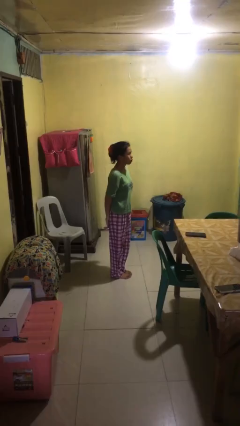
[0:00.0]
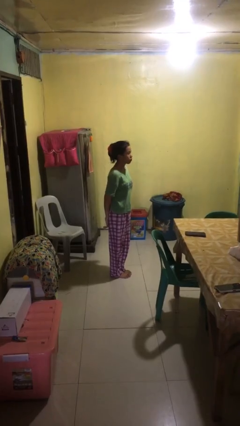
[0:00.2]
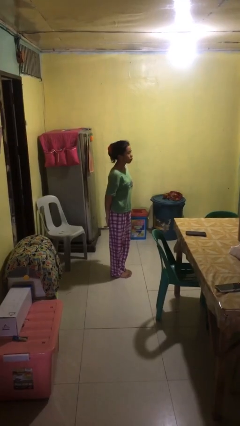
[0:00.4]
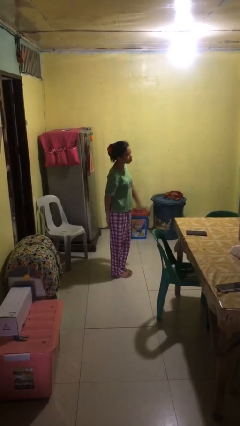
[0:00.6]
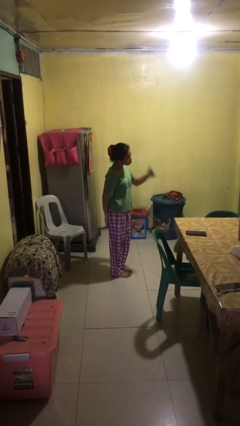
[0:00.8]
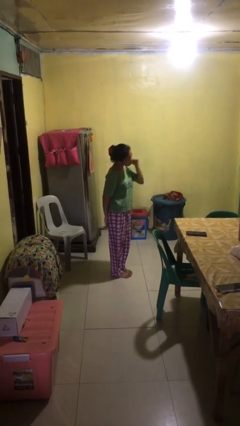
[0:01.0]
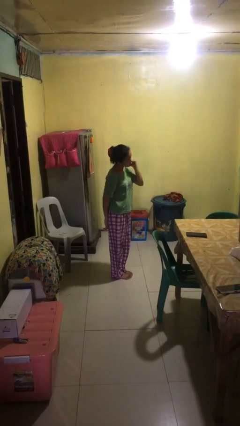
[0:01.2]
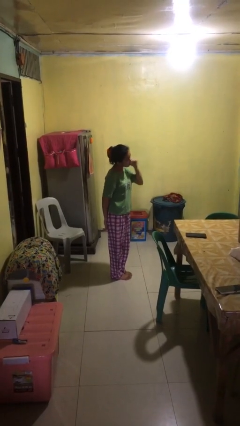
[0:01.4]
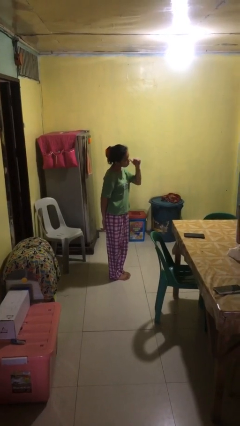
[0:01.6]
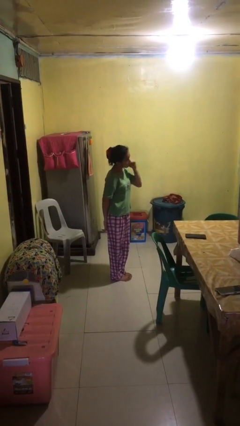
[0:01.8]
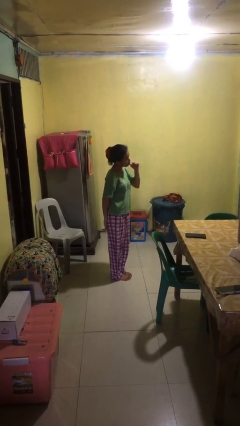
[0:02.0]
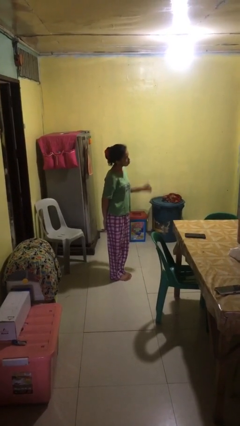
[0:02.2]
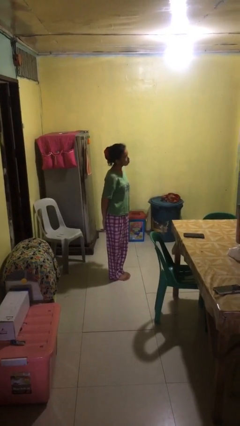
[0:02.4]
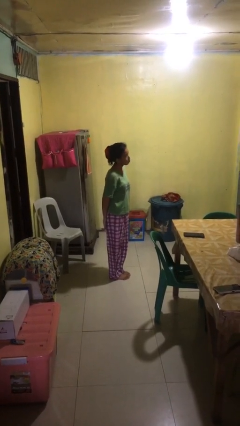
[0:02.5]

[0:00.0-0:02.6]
person gestures behind me

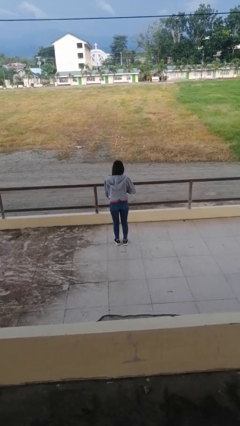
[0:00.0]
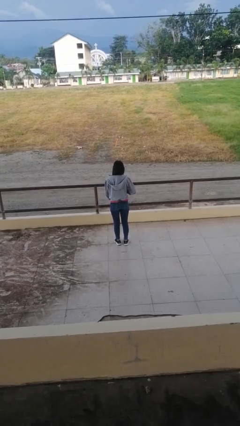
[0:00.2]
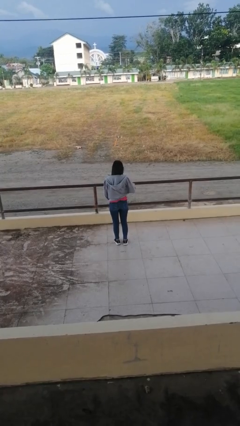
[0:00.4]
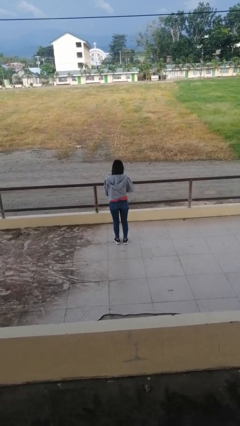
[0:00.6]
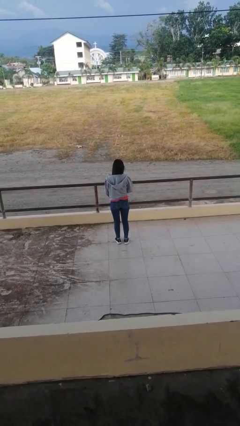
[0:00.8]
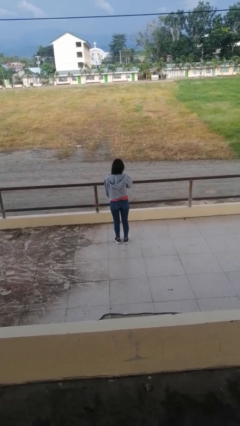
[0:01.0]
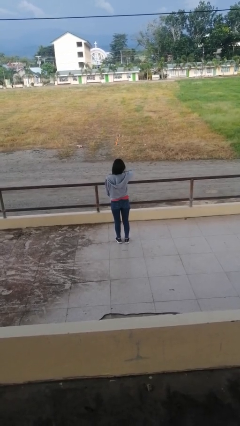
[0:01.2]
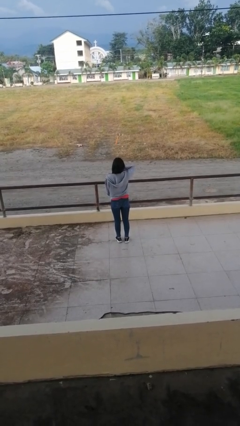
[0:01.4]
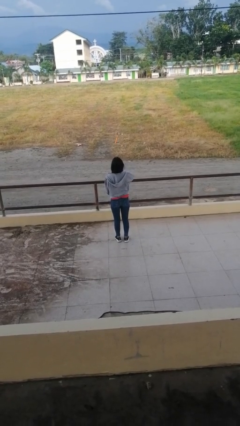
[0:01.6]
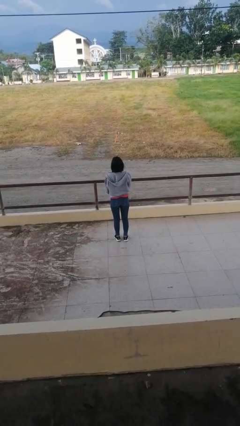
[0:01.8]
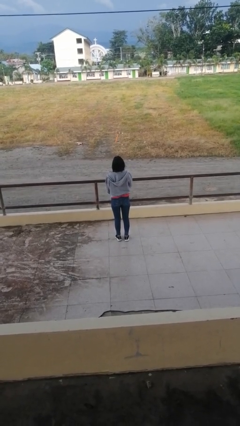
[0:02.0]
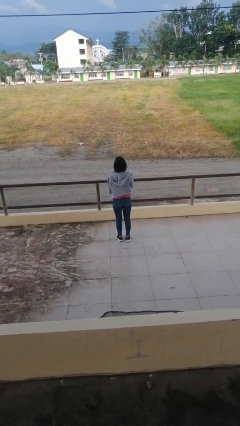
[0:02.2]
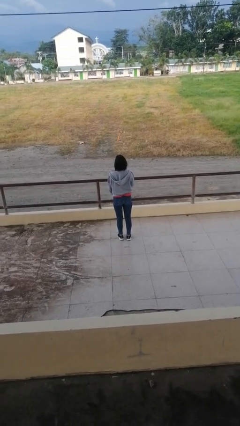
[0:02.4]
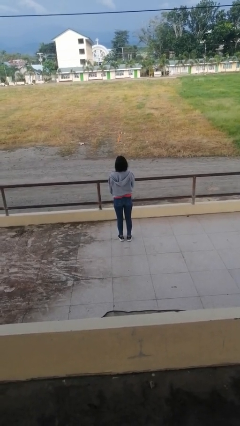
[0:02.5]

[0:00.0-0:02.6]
person zips up jacket

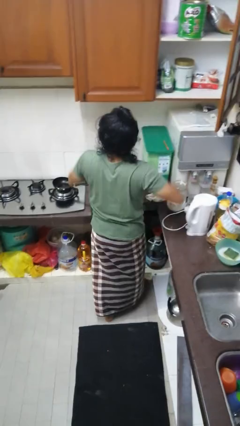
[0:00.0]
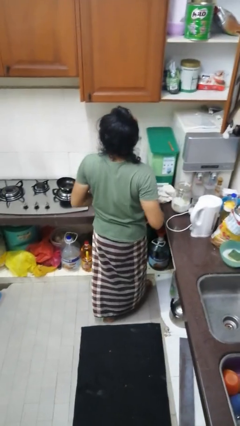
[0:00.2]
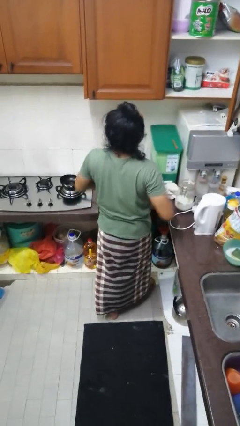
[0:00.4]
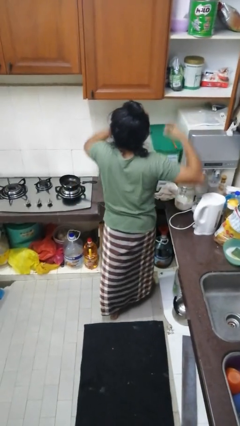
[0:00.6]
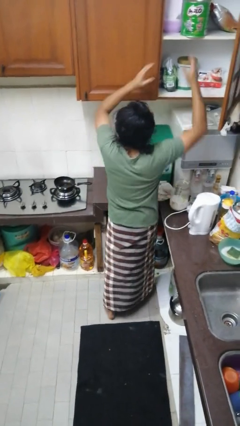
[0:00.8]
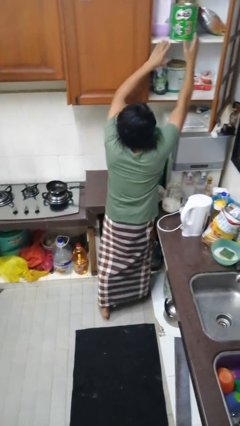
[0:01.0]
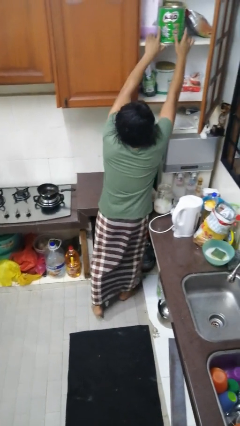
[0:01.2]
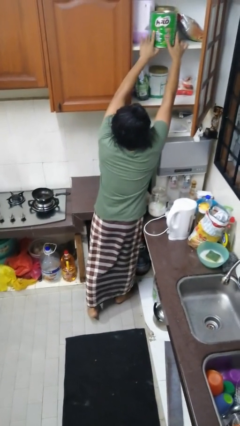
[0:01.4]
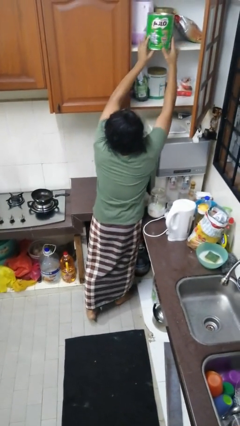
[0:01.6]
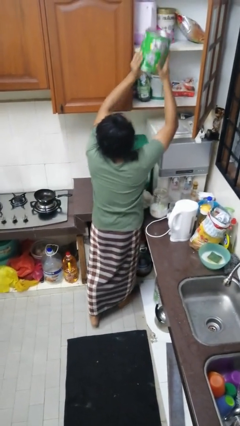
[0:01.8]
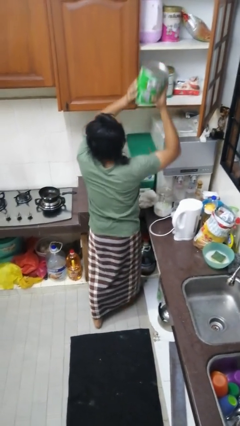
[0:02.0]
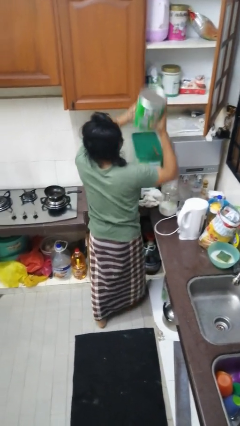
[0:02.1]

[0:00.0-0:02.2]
person takes object from cabinet

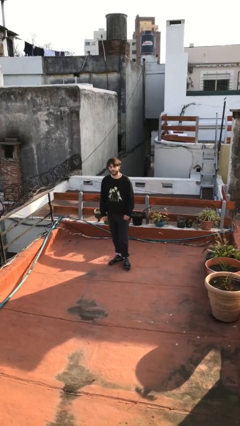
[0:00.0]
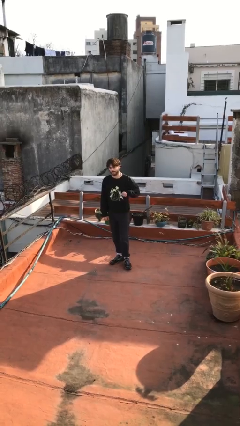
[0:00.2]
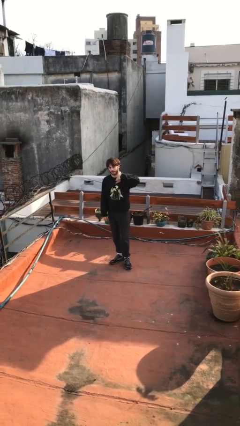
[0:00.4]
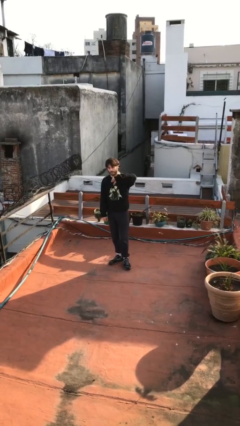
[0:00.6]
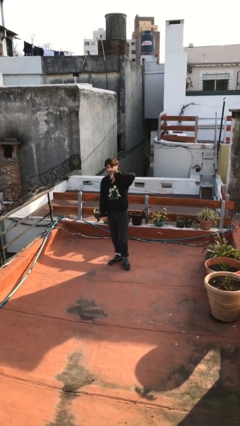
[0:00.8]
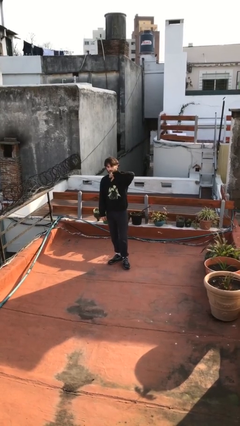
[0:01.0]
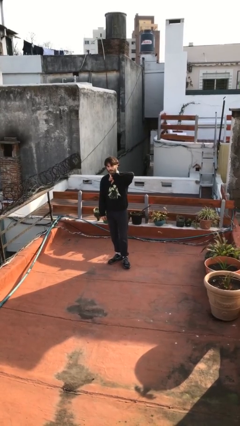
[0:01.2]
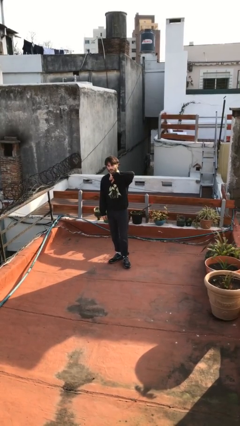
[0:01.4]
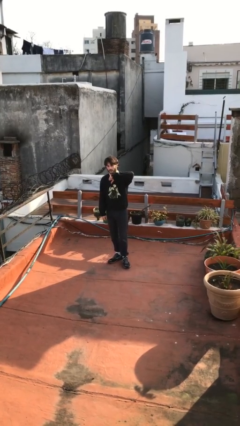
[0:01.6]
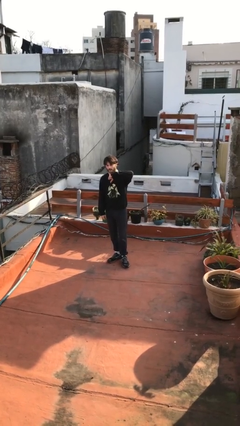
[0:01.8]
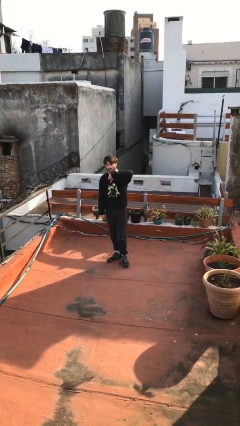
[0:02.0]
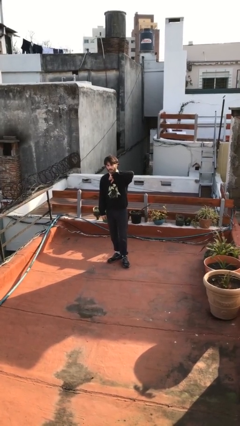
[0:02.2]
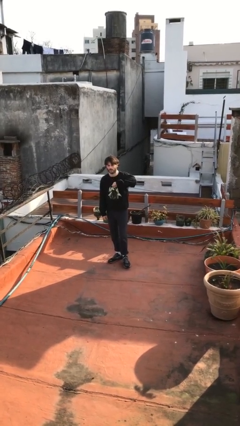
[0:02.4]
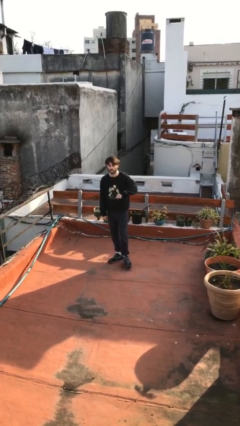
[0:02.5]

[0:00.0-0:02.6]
person gestures thumbs down

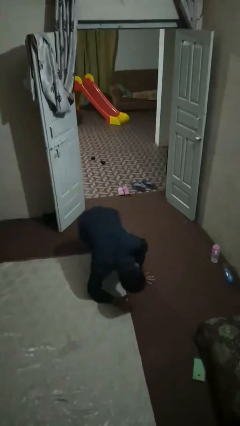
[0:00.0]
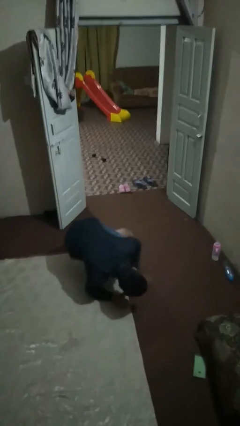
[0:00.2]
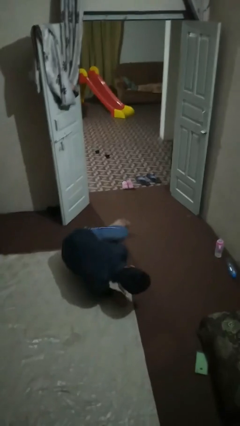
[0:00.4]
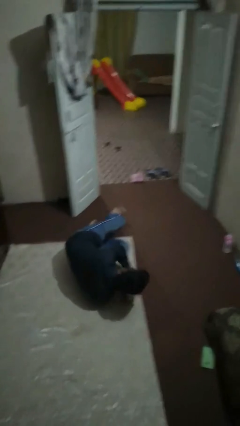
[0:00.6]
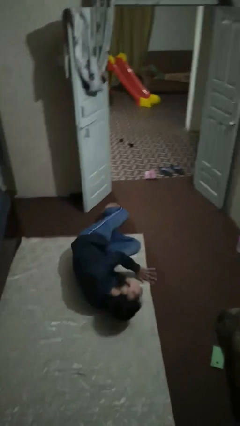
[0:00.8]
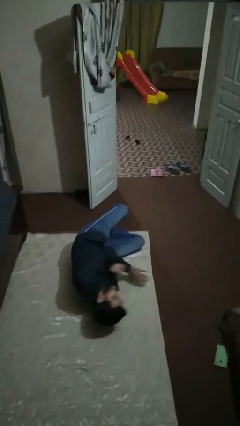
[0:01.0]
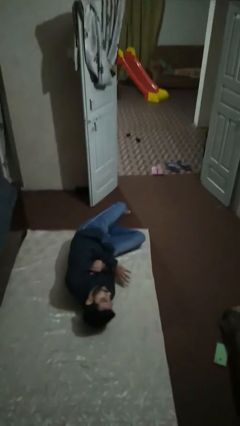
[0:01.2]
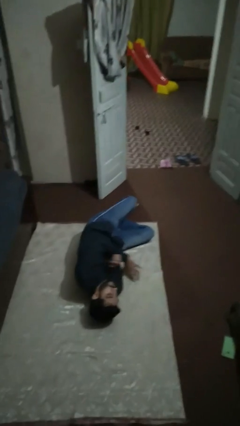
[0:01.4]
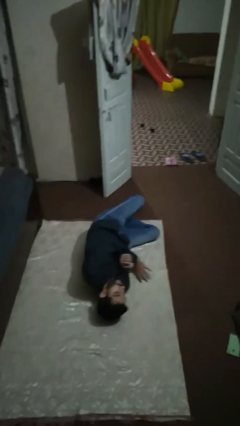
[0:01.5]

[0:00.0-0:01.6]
person lies down on floor

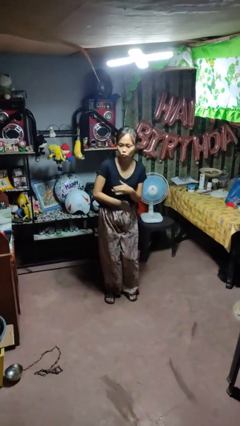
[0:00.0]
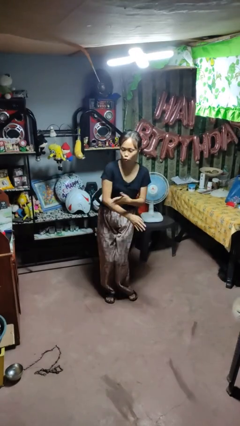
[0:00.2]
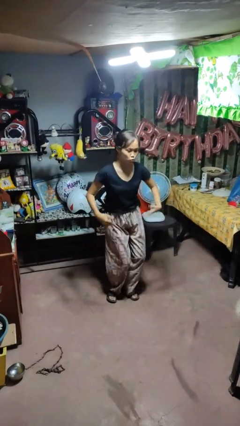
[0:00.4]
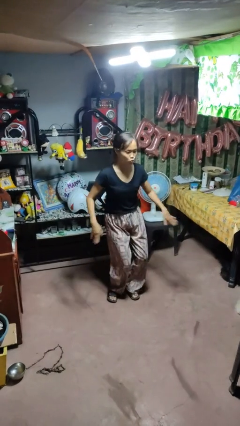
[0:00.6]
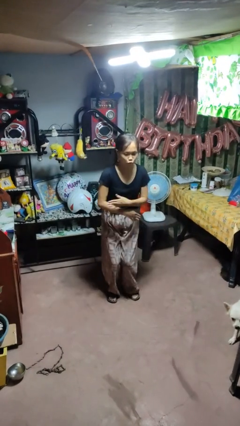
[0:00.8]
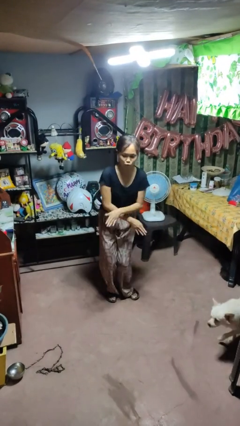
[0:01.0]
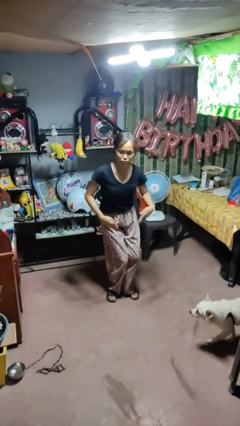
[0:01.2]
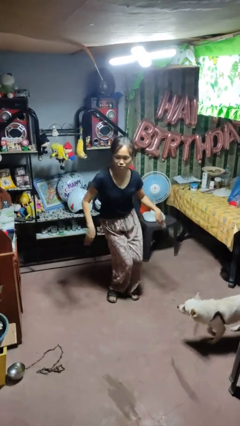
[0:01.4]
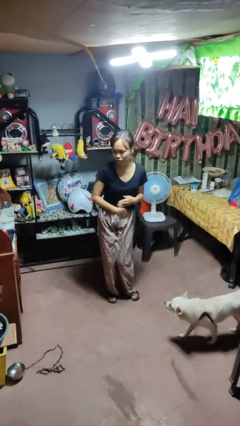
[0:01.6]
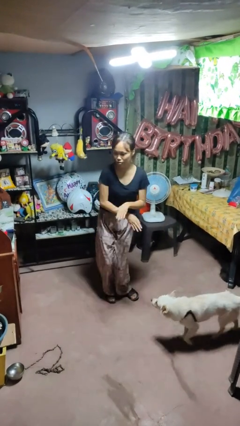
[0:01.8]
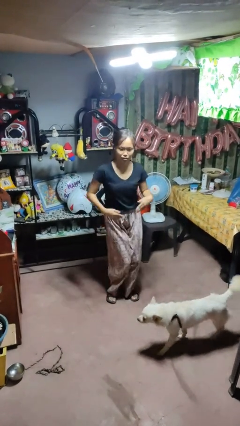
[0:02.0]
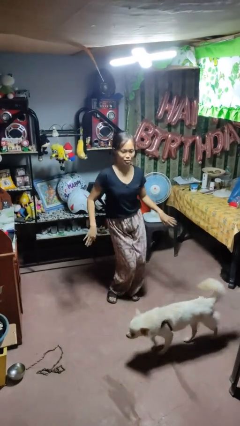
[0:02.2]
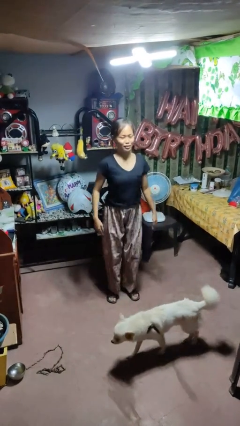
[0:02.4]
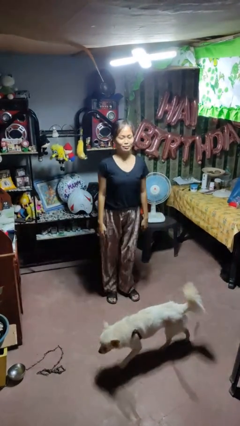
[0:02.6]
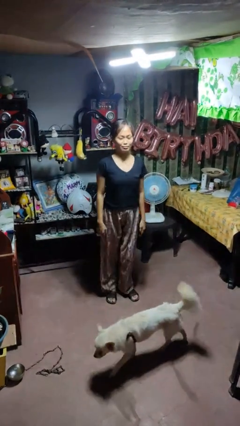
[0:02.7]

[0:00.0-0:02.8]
person dances in place

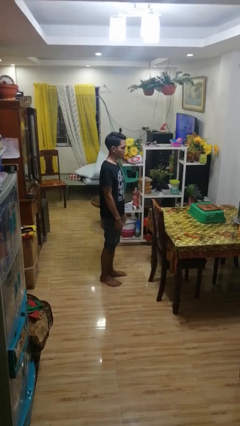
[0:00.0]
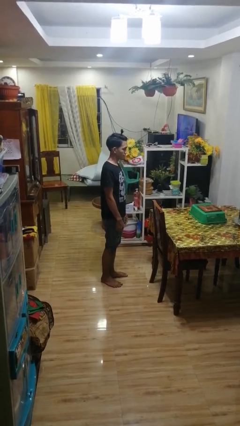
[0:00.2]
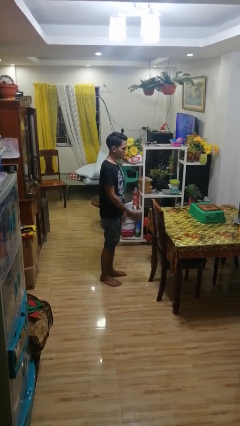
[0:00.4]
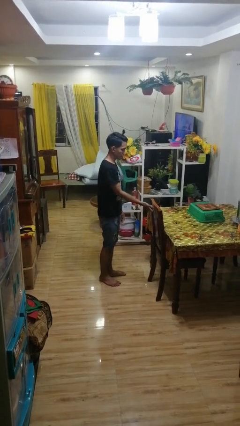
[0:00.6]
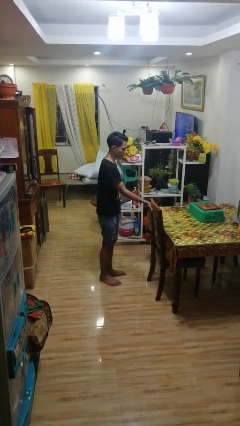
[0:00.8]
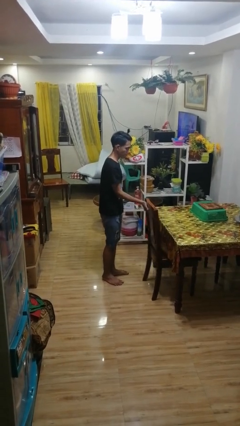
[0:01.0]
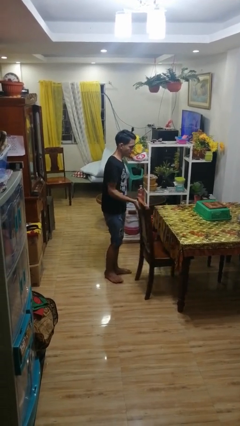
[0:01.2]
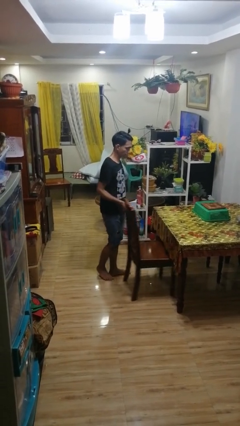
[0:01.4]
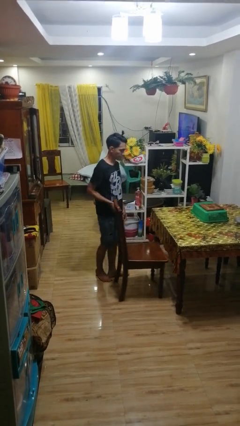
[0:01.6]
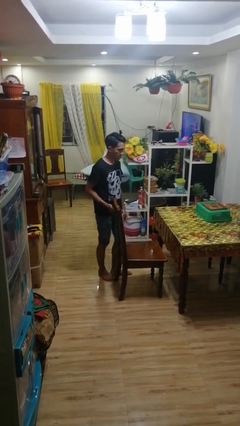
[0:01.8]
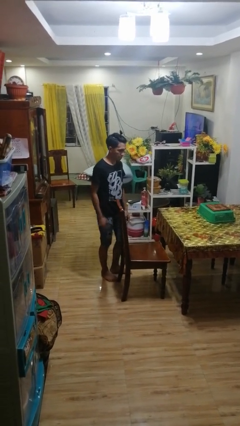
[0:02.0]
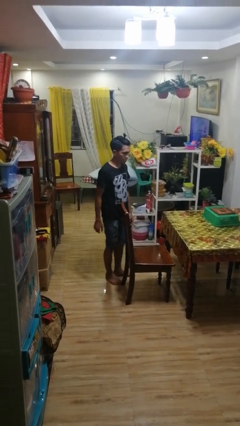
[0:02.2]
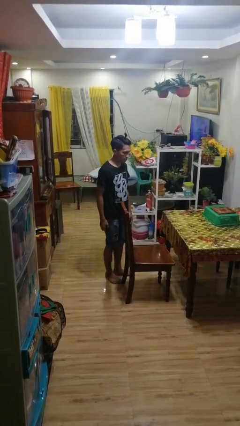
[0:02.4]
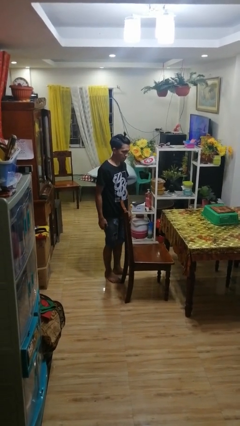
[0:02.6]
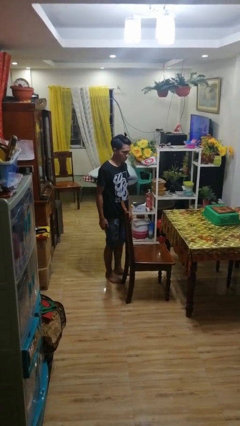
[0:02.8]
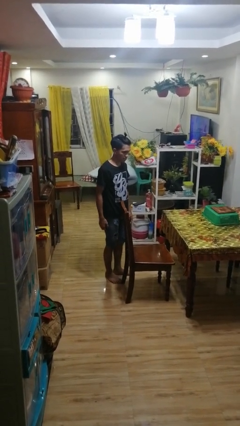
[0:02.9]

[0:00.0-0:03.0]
person pulls out chair
